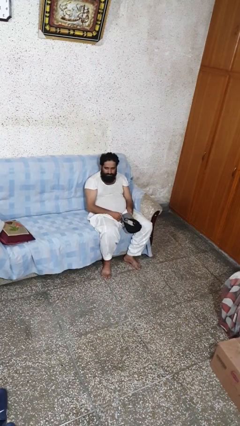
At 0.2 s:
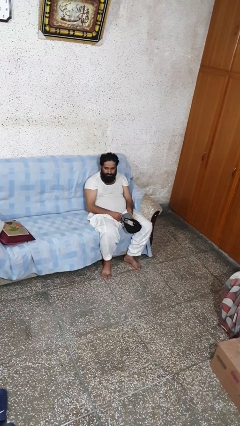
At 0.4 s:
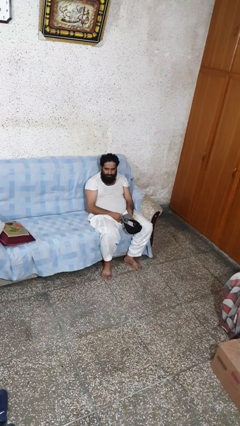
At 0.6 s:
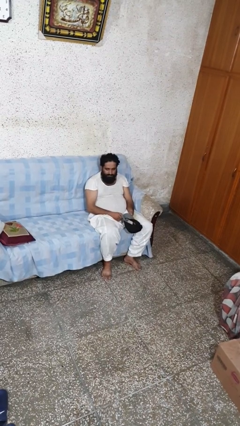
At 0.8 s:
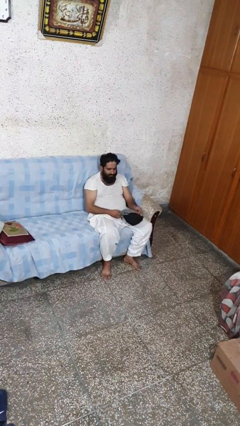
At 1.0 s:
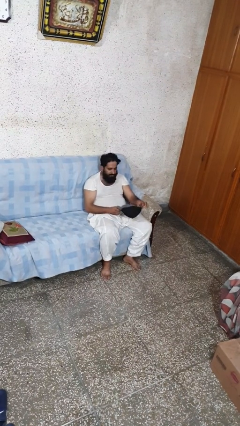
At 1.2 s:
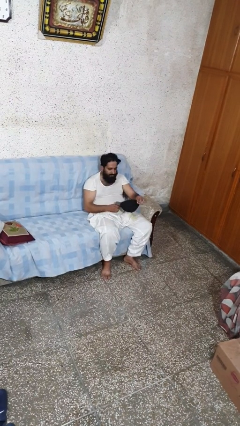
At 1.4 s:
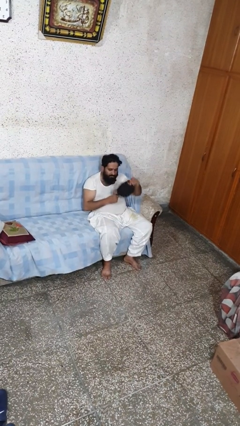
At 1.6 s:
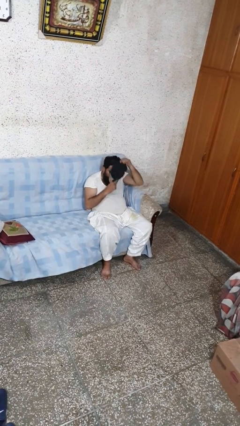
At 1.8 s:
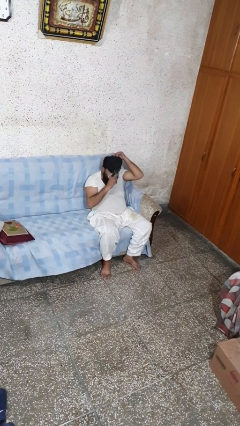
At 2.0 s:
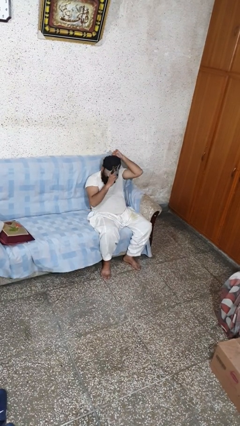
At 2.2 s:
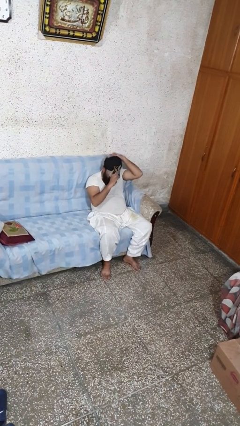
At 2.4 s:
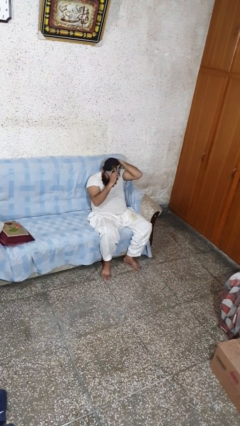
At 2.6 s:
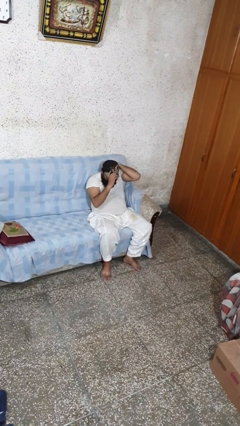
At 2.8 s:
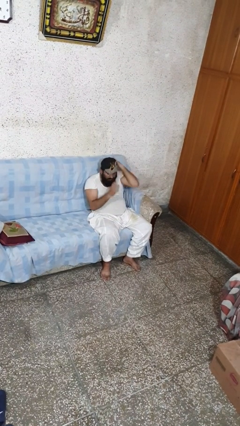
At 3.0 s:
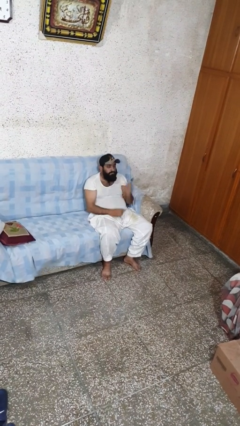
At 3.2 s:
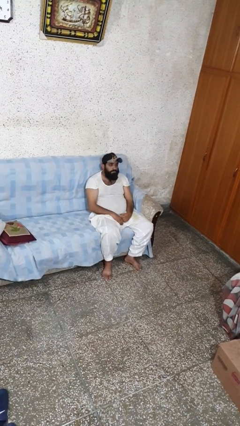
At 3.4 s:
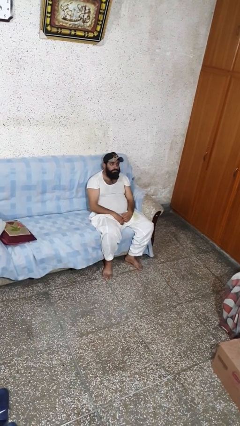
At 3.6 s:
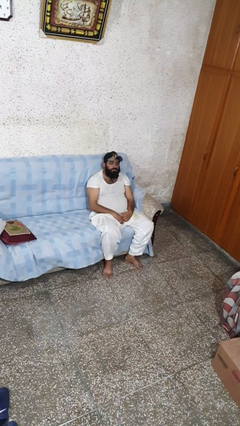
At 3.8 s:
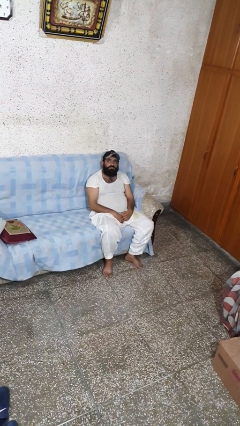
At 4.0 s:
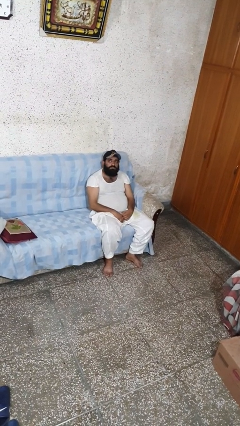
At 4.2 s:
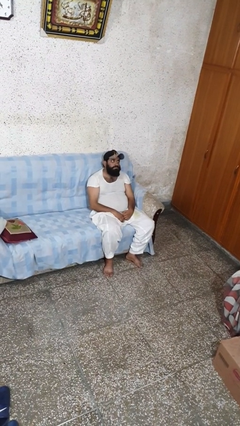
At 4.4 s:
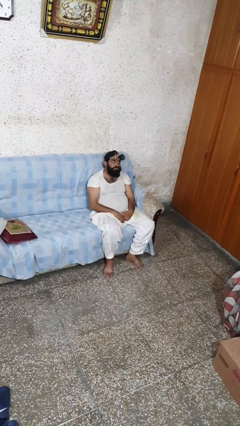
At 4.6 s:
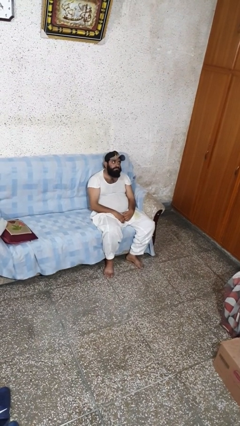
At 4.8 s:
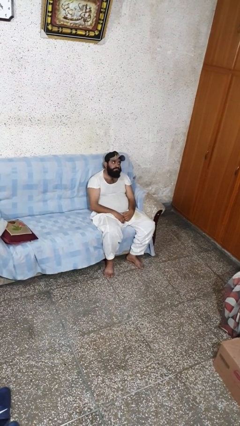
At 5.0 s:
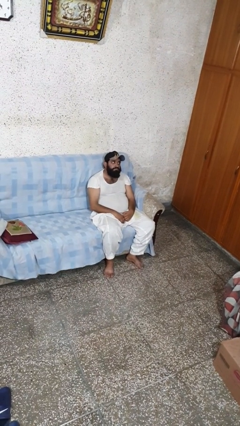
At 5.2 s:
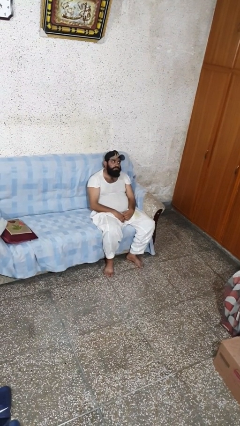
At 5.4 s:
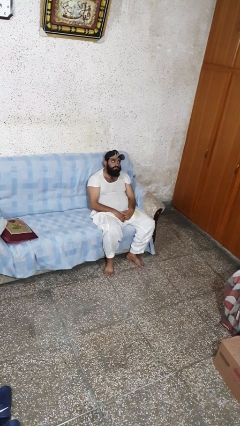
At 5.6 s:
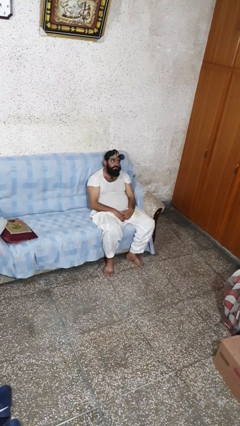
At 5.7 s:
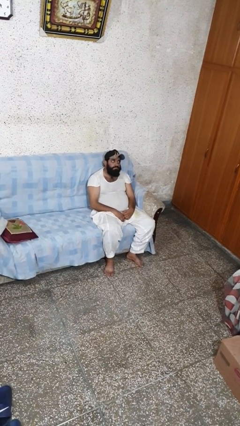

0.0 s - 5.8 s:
person puts on hat

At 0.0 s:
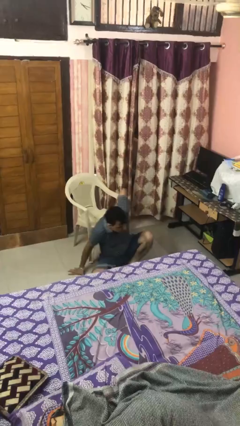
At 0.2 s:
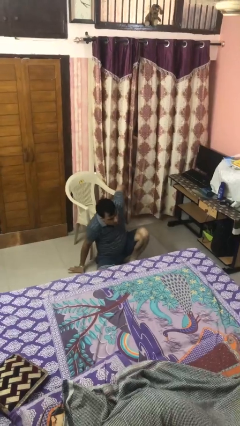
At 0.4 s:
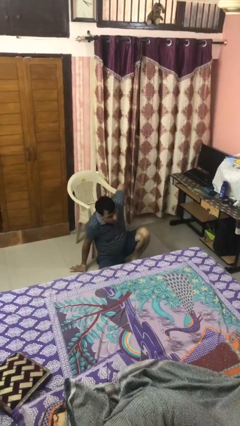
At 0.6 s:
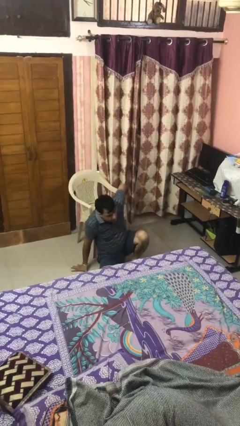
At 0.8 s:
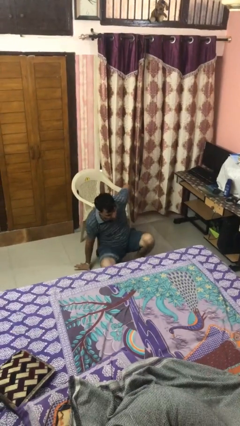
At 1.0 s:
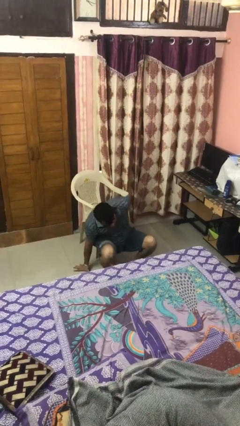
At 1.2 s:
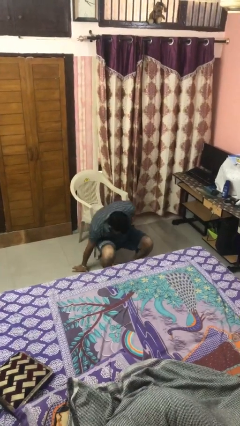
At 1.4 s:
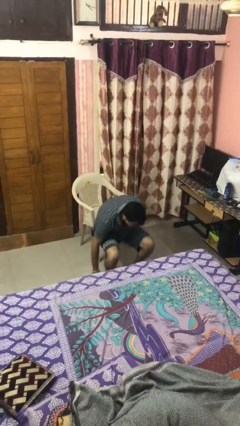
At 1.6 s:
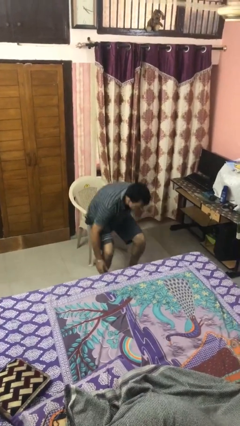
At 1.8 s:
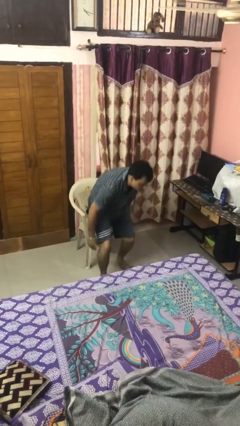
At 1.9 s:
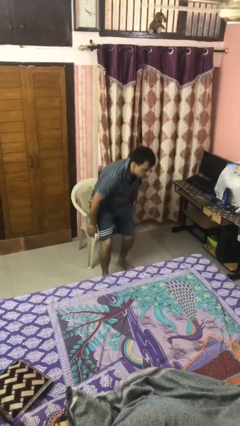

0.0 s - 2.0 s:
person stands up from floor

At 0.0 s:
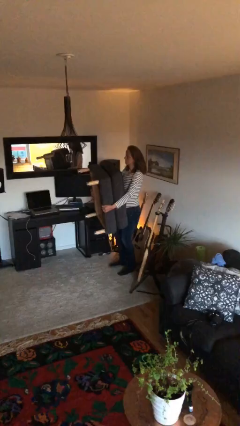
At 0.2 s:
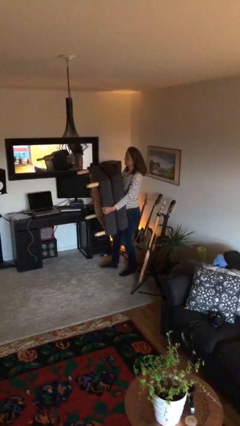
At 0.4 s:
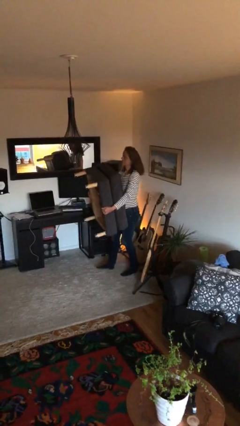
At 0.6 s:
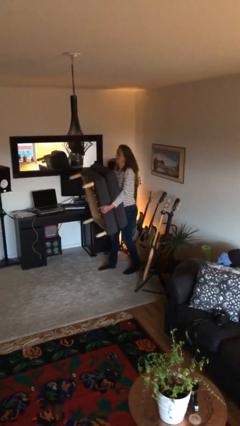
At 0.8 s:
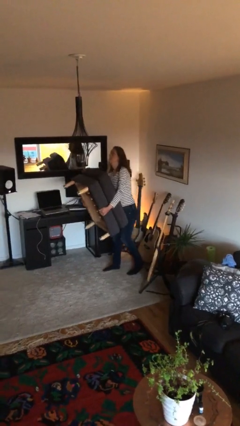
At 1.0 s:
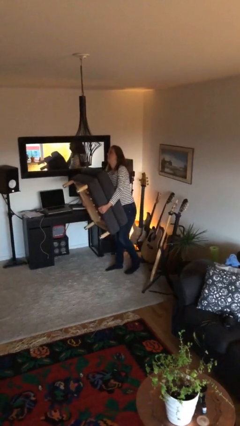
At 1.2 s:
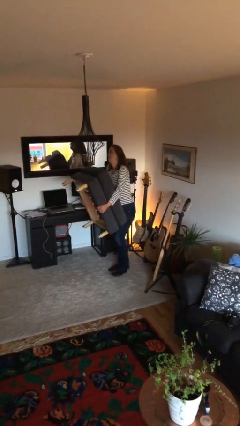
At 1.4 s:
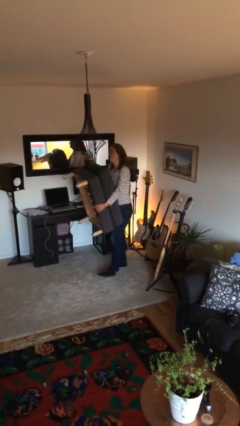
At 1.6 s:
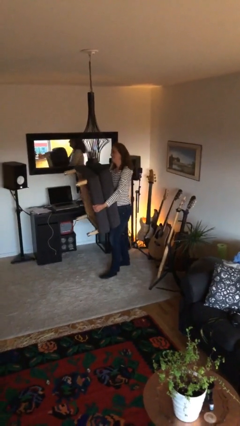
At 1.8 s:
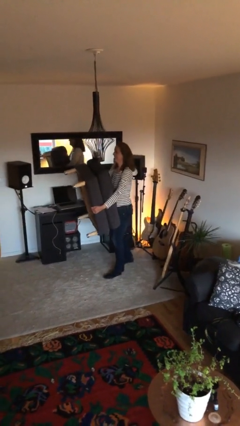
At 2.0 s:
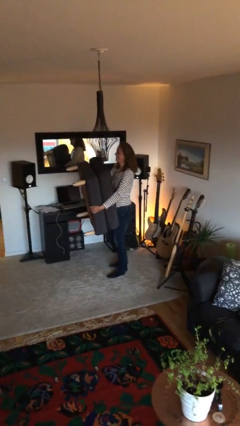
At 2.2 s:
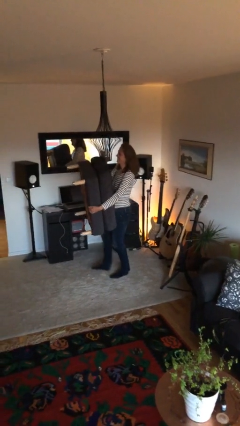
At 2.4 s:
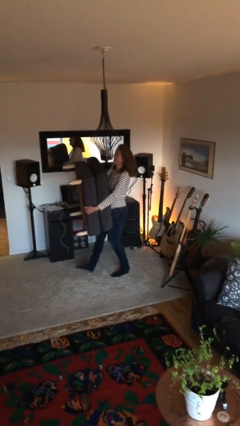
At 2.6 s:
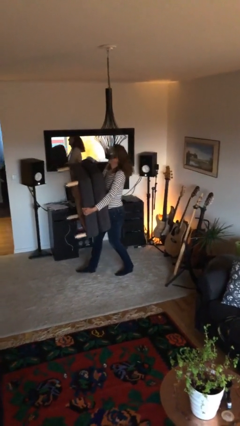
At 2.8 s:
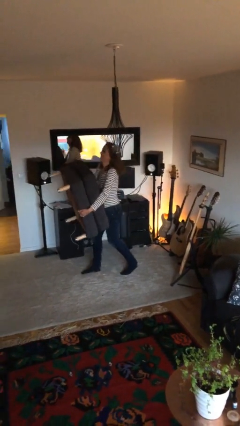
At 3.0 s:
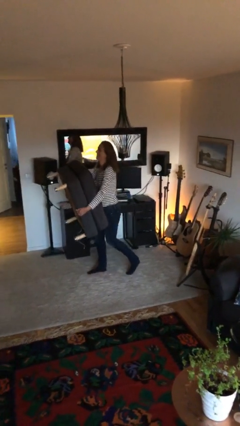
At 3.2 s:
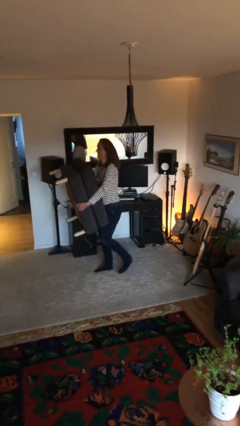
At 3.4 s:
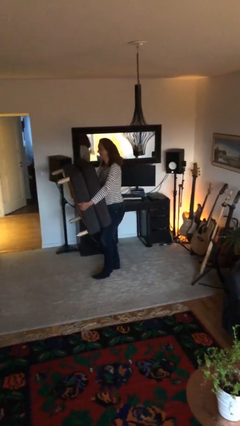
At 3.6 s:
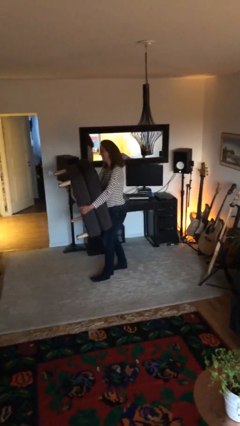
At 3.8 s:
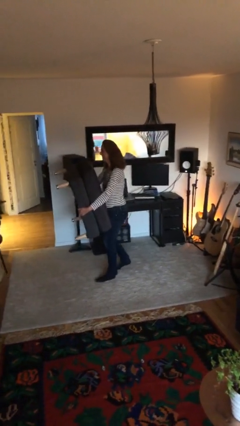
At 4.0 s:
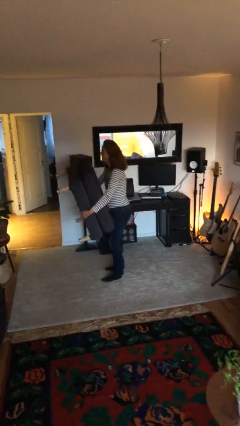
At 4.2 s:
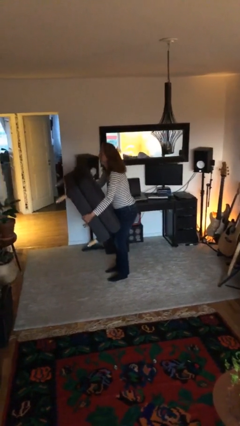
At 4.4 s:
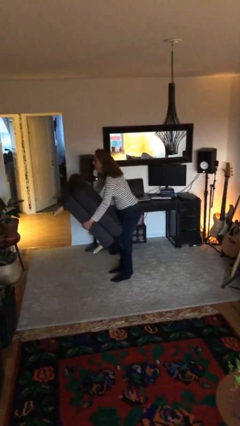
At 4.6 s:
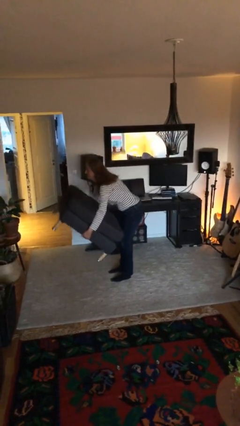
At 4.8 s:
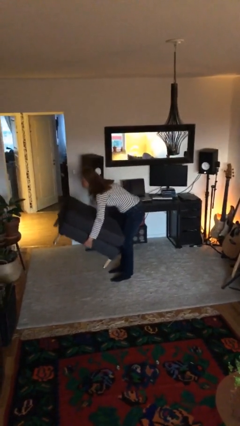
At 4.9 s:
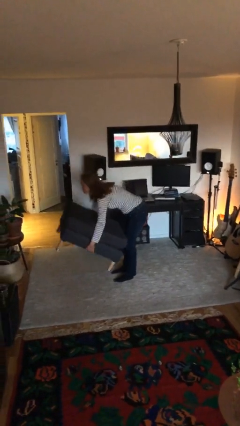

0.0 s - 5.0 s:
person carries heavy object

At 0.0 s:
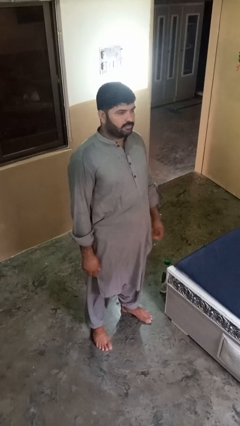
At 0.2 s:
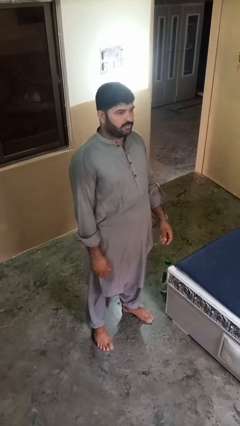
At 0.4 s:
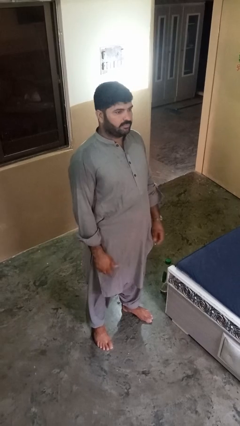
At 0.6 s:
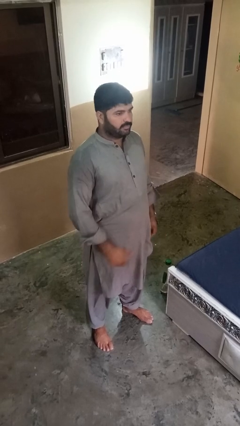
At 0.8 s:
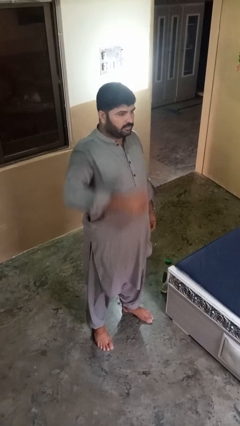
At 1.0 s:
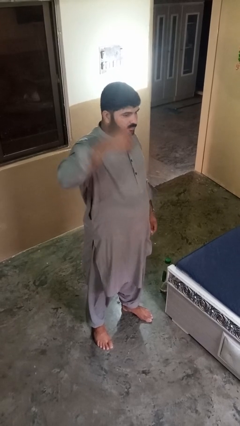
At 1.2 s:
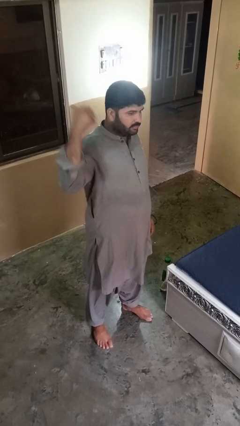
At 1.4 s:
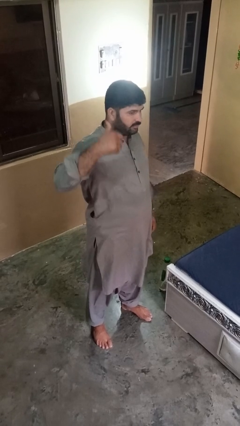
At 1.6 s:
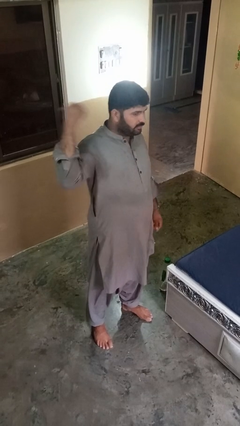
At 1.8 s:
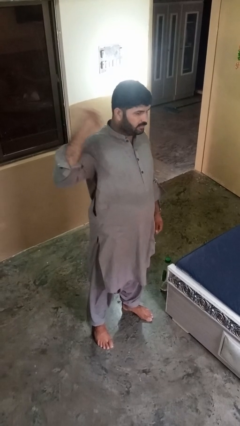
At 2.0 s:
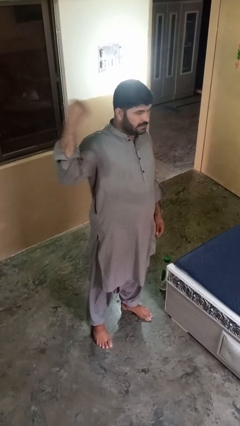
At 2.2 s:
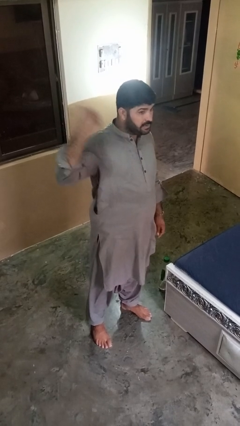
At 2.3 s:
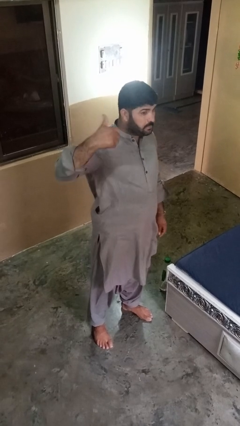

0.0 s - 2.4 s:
person gestures behind me

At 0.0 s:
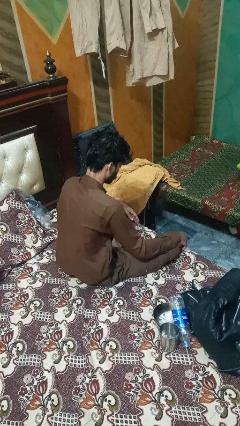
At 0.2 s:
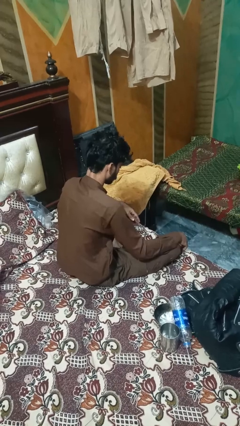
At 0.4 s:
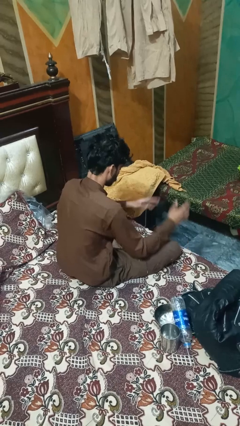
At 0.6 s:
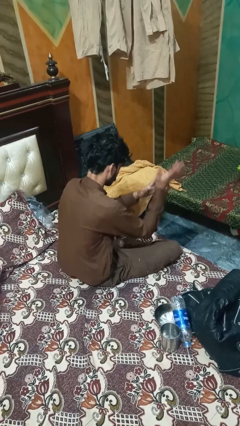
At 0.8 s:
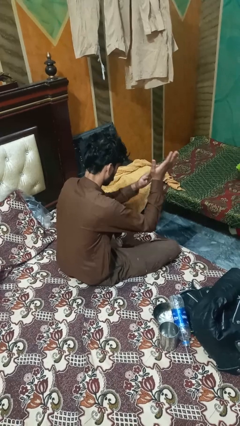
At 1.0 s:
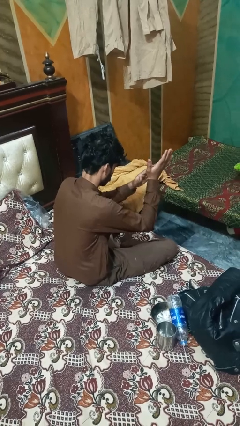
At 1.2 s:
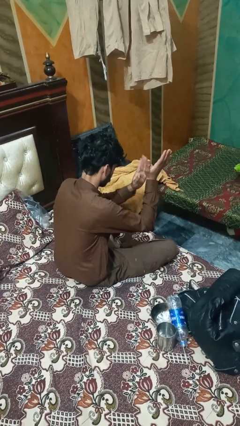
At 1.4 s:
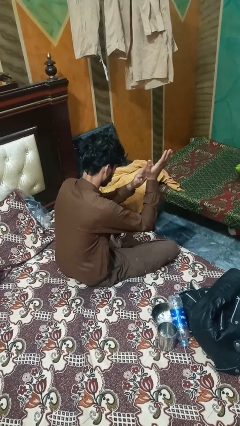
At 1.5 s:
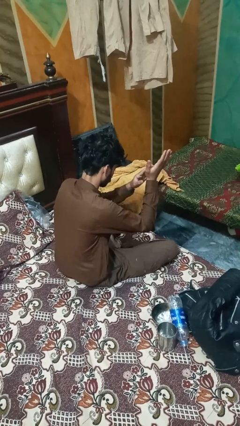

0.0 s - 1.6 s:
person claps hands

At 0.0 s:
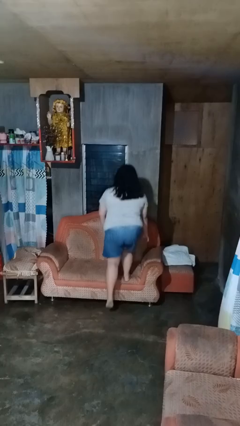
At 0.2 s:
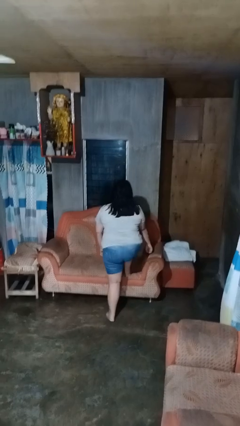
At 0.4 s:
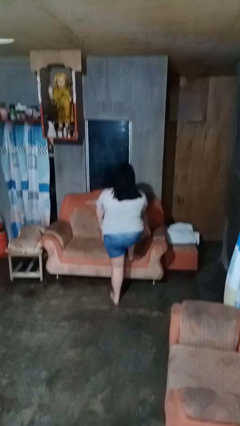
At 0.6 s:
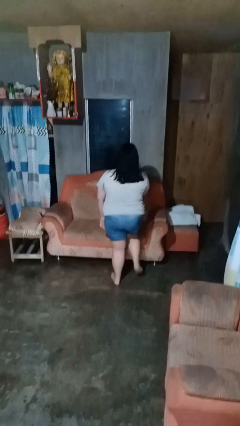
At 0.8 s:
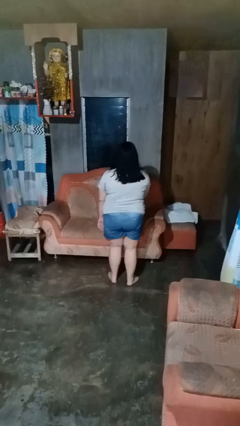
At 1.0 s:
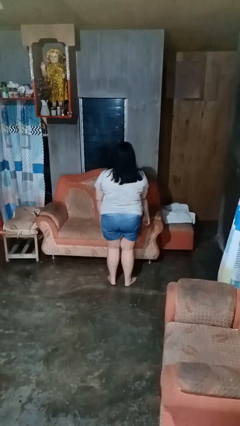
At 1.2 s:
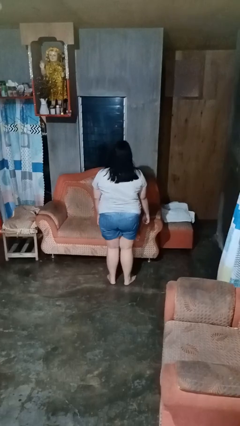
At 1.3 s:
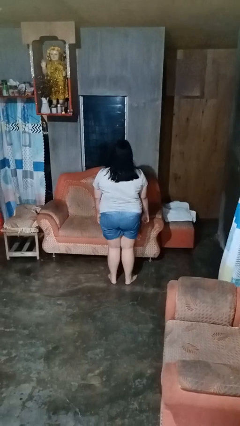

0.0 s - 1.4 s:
person climbs off couch
